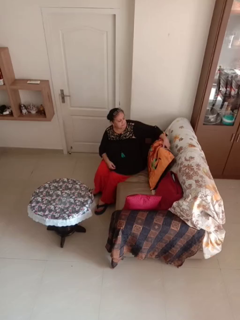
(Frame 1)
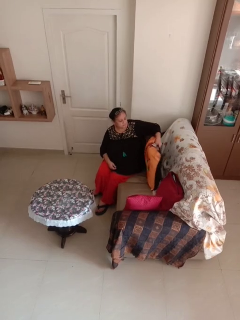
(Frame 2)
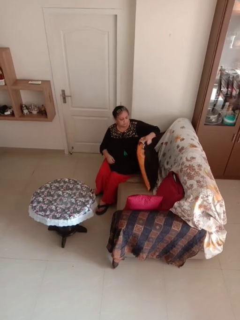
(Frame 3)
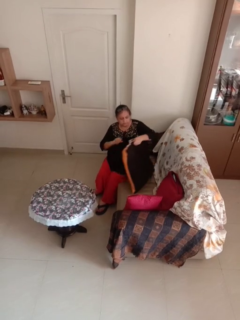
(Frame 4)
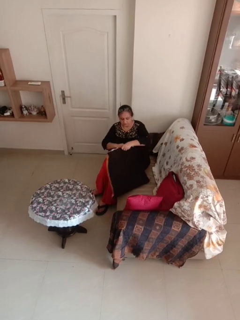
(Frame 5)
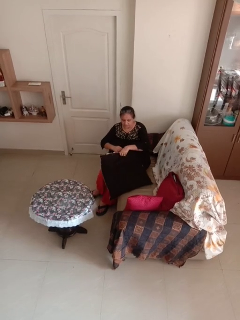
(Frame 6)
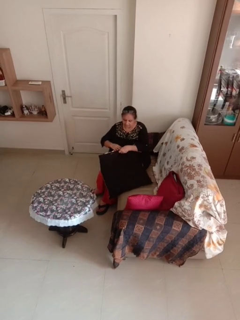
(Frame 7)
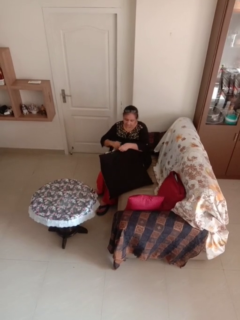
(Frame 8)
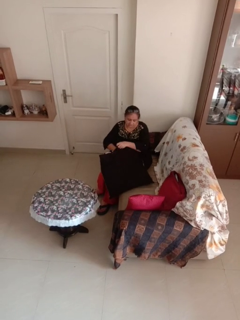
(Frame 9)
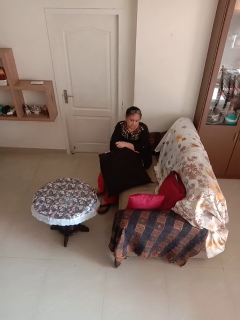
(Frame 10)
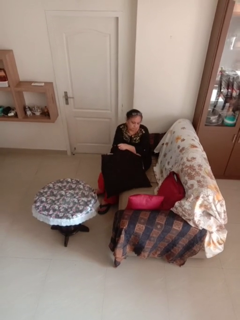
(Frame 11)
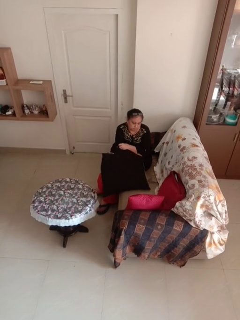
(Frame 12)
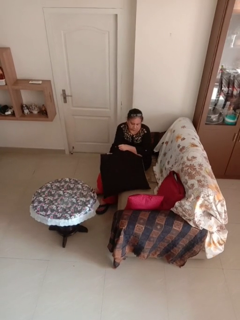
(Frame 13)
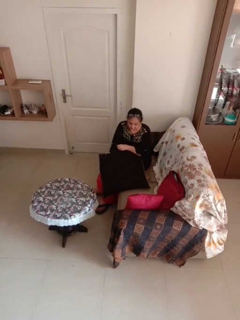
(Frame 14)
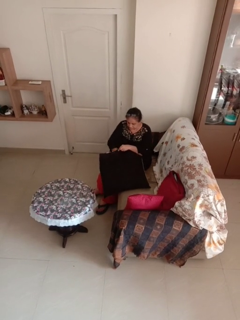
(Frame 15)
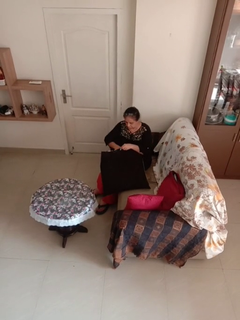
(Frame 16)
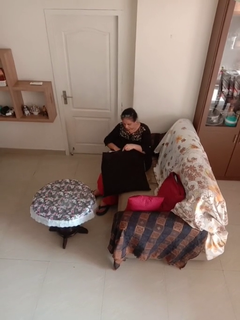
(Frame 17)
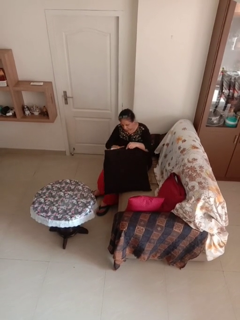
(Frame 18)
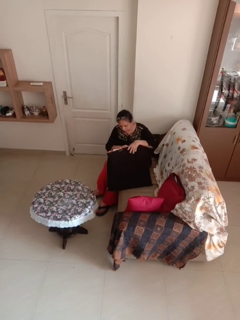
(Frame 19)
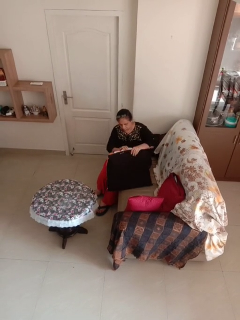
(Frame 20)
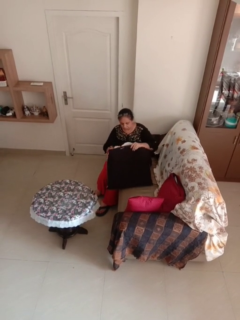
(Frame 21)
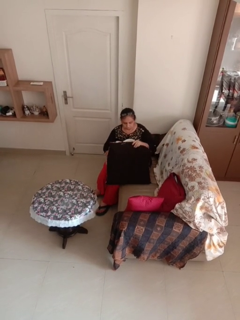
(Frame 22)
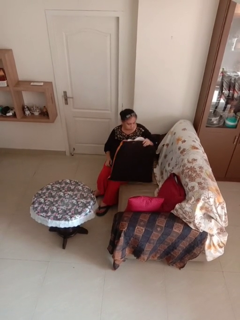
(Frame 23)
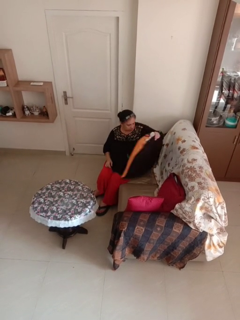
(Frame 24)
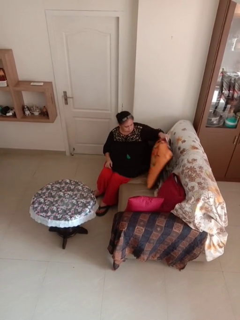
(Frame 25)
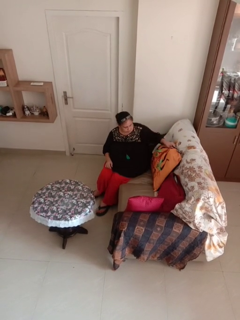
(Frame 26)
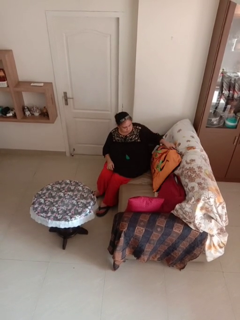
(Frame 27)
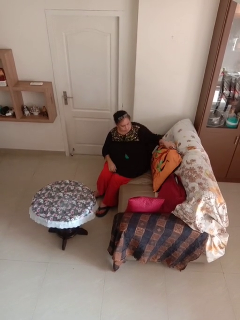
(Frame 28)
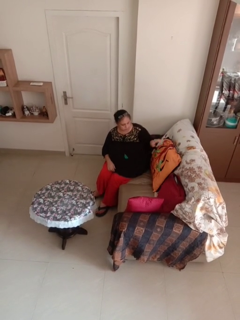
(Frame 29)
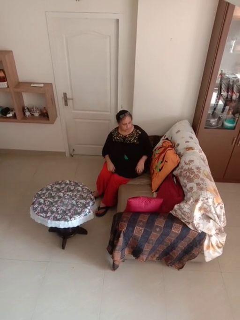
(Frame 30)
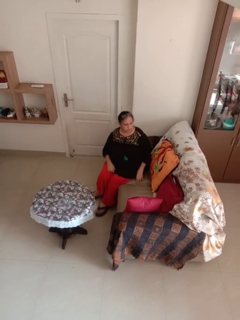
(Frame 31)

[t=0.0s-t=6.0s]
person searches in couch

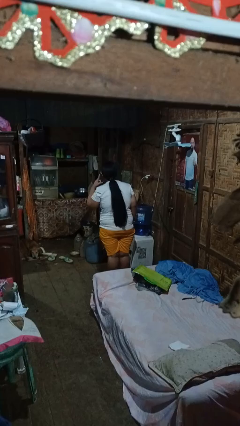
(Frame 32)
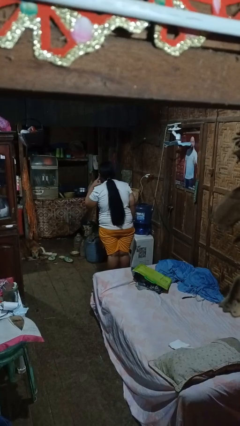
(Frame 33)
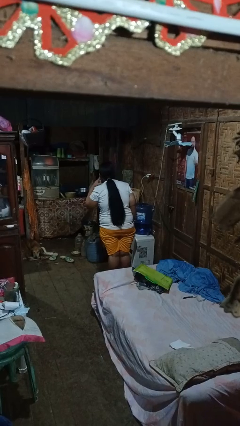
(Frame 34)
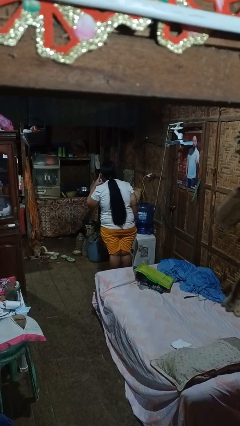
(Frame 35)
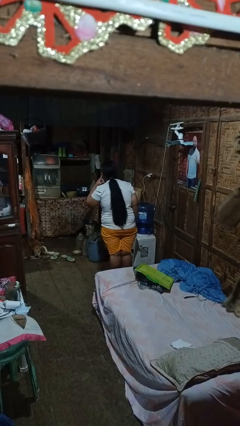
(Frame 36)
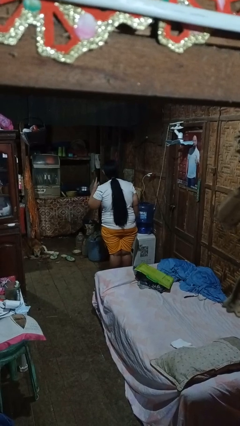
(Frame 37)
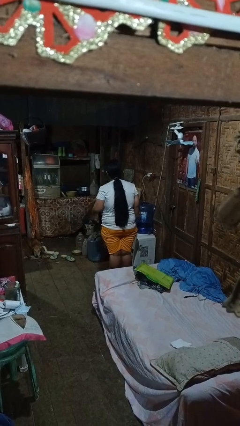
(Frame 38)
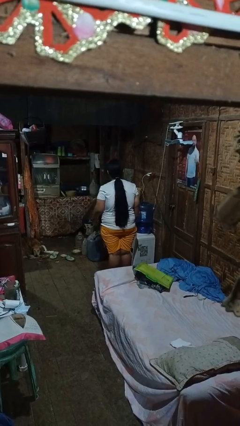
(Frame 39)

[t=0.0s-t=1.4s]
person gestures listen closely

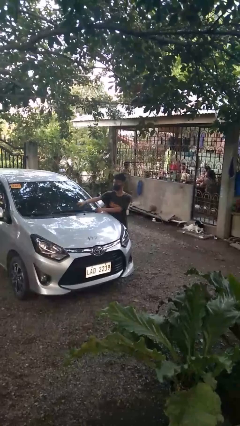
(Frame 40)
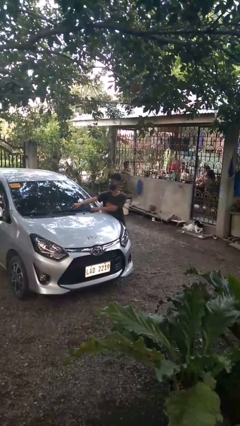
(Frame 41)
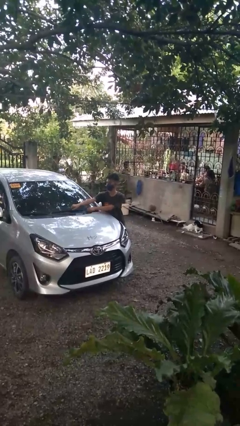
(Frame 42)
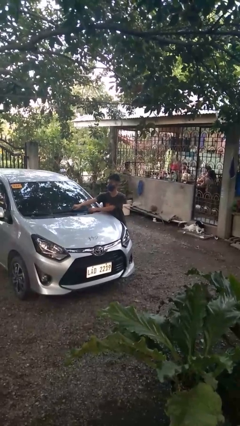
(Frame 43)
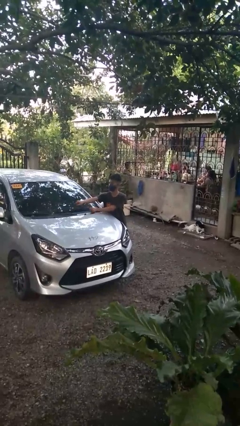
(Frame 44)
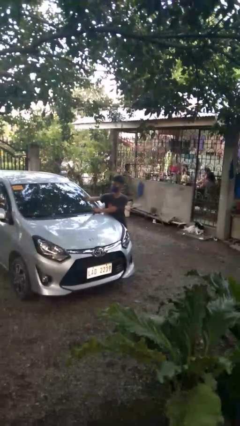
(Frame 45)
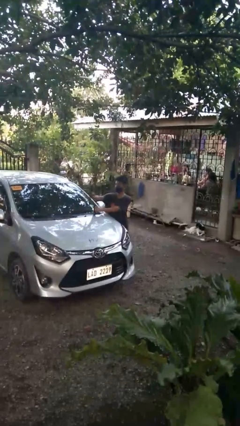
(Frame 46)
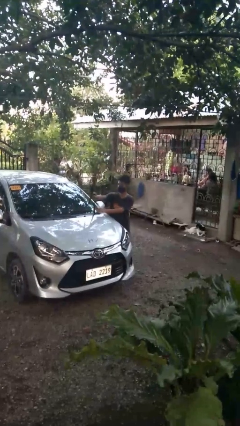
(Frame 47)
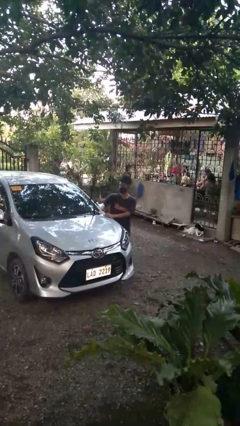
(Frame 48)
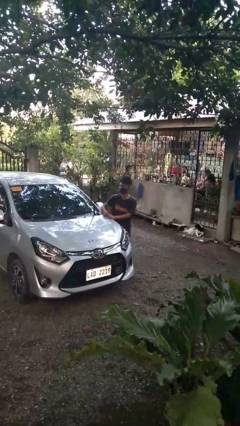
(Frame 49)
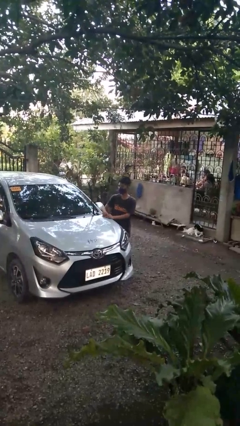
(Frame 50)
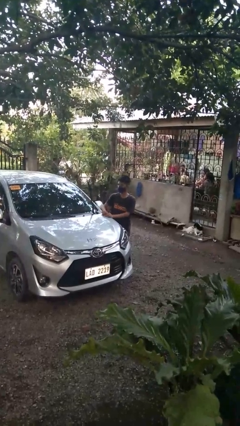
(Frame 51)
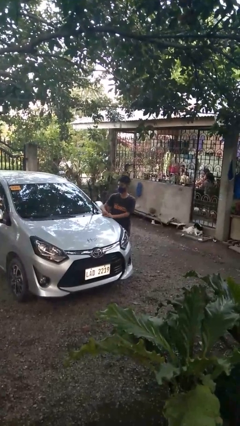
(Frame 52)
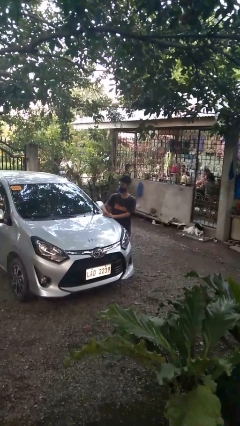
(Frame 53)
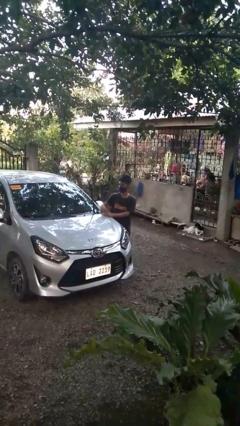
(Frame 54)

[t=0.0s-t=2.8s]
person flips up car wipers

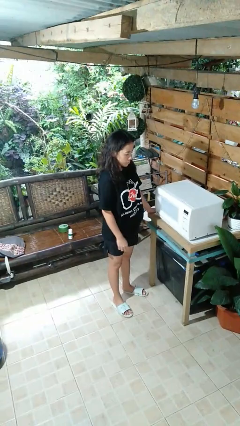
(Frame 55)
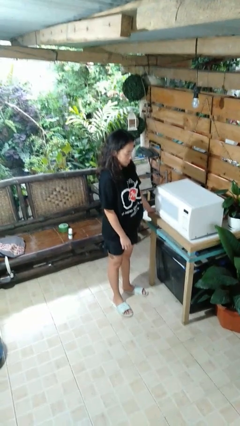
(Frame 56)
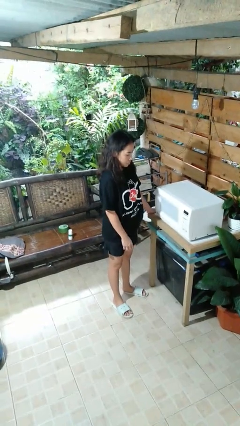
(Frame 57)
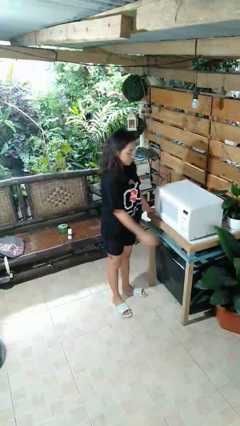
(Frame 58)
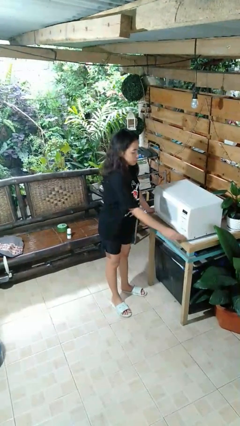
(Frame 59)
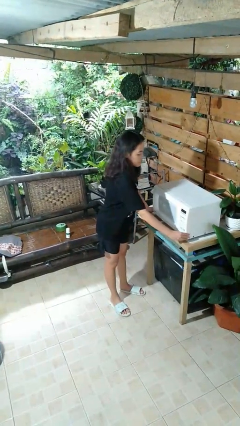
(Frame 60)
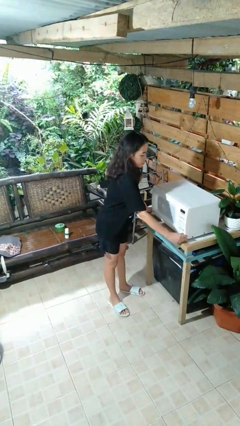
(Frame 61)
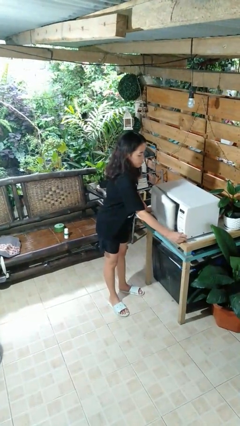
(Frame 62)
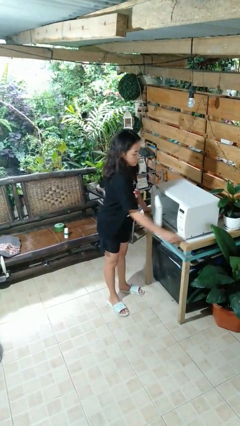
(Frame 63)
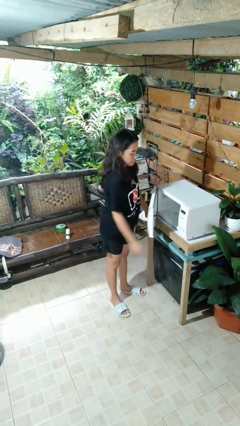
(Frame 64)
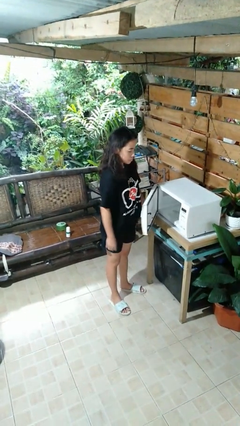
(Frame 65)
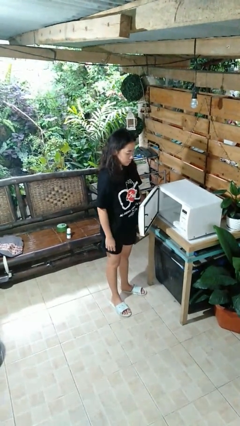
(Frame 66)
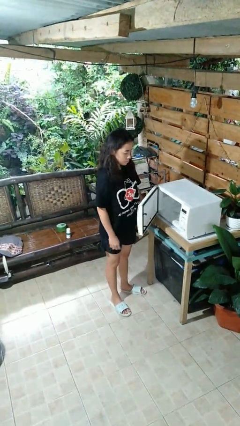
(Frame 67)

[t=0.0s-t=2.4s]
person opens microwave

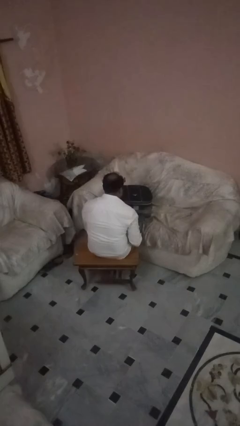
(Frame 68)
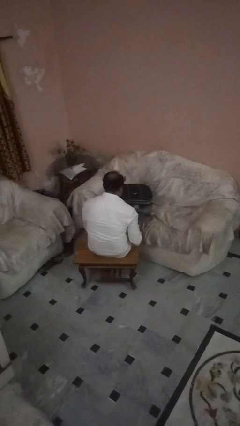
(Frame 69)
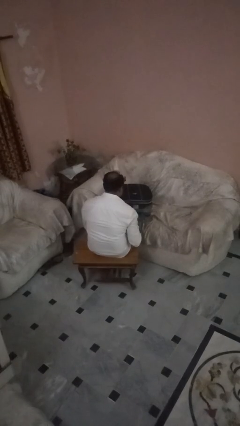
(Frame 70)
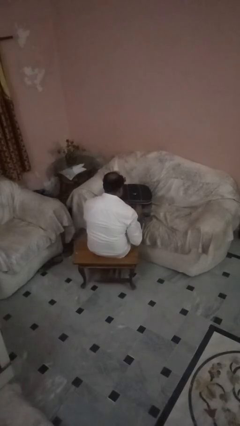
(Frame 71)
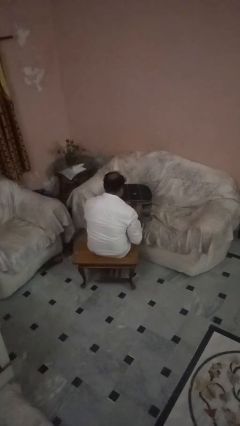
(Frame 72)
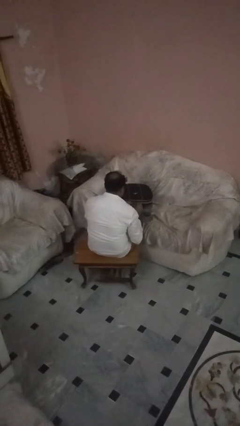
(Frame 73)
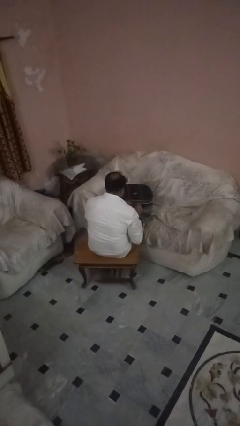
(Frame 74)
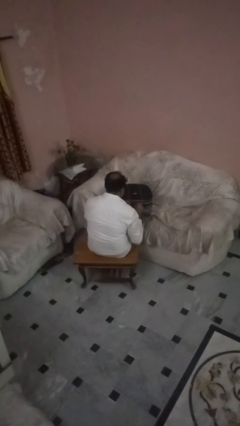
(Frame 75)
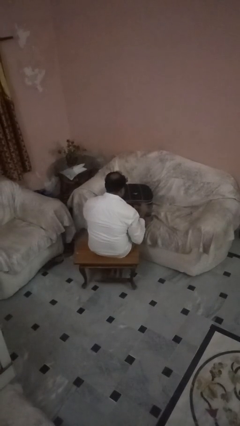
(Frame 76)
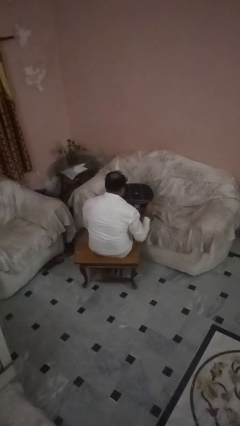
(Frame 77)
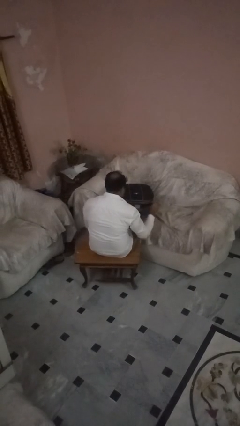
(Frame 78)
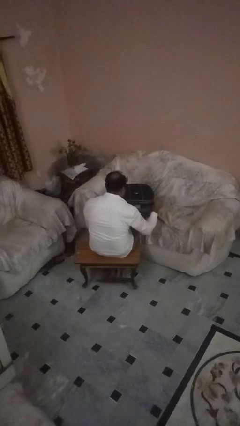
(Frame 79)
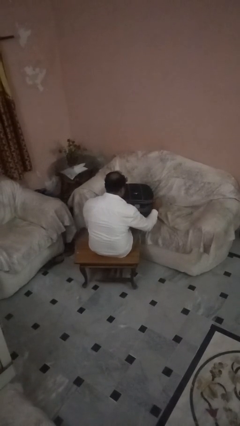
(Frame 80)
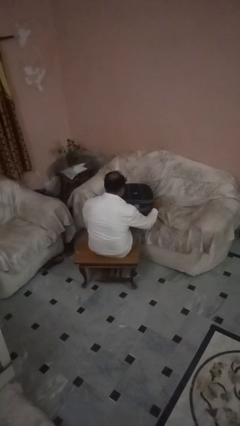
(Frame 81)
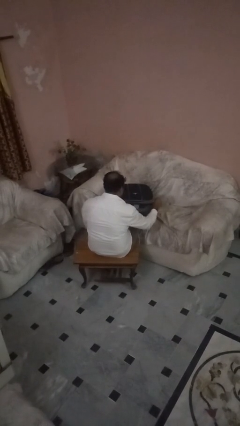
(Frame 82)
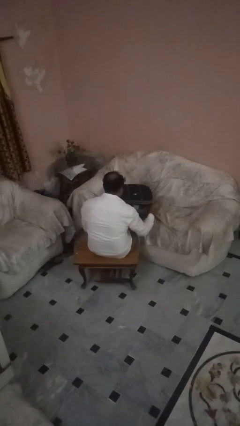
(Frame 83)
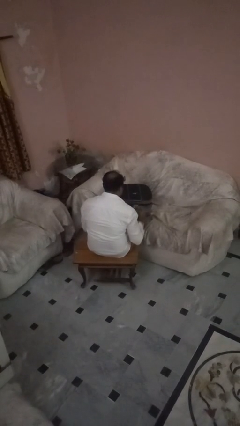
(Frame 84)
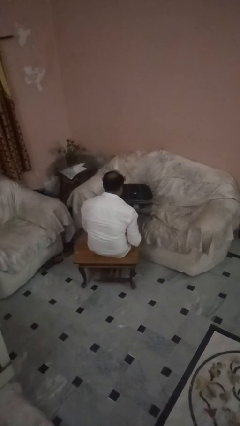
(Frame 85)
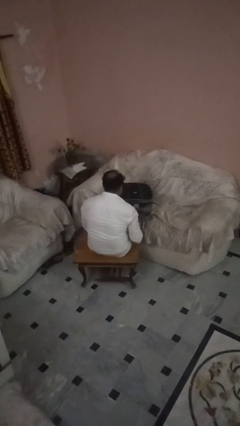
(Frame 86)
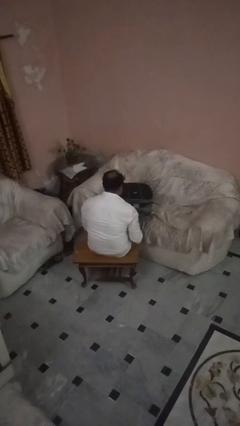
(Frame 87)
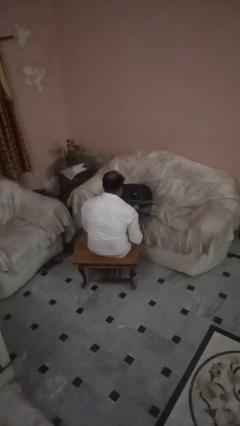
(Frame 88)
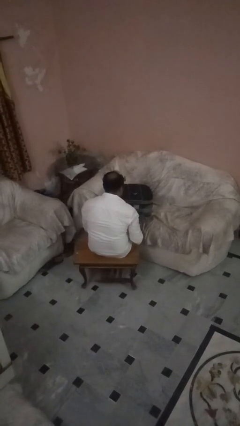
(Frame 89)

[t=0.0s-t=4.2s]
person opens suitcase

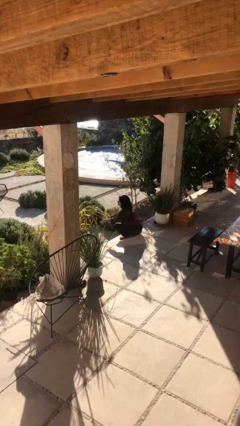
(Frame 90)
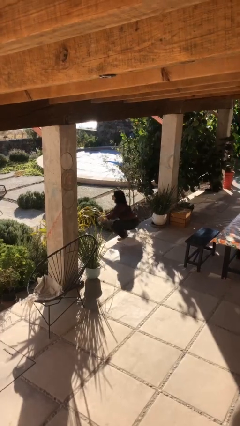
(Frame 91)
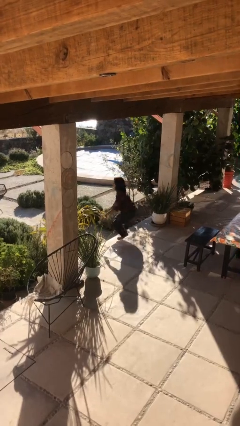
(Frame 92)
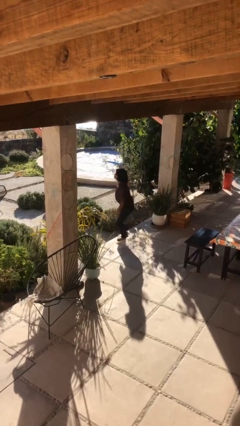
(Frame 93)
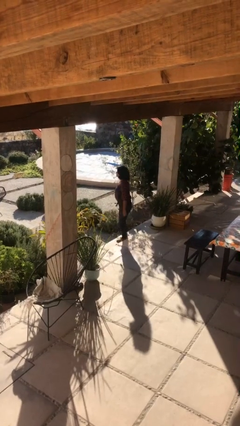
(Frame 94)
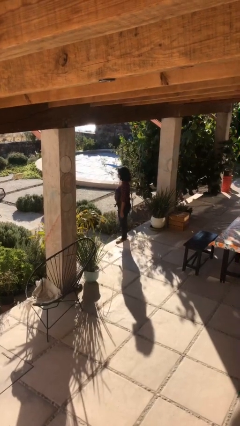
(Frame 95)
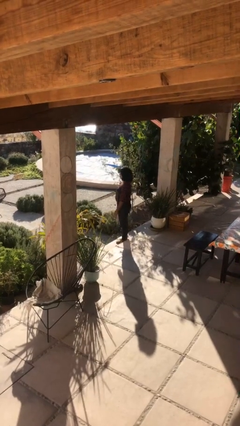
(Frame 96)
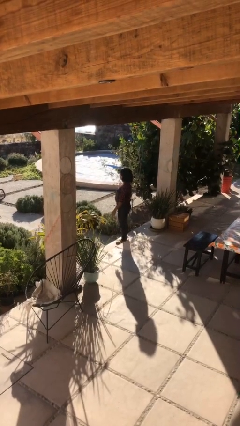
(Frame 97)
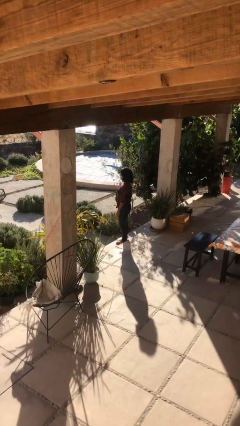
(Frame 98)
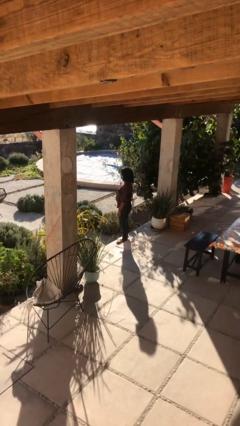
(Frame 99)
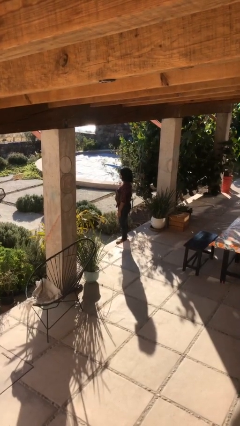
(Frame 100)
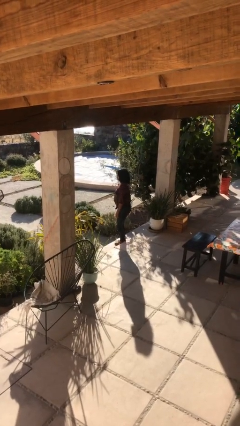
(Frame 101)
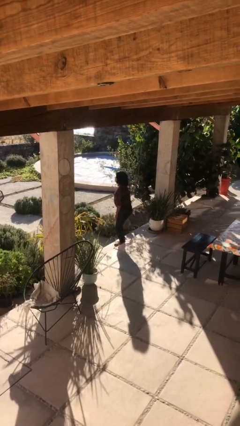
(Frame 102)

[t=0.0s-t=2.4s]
person stands up
